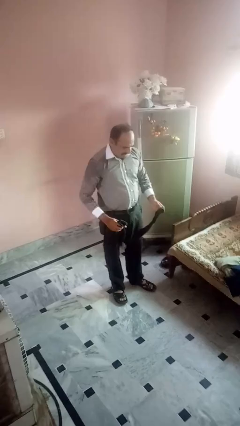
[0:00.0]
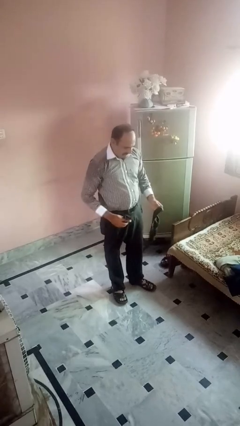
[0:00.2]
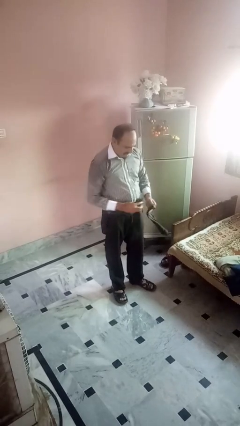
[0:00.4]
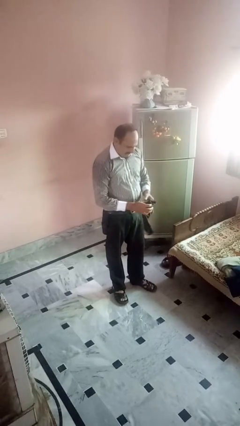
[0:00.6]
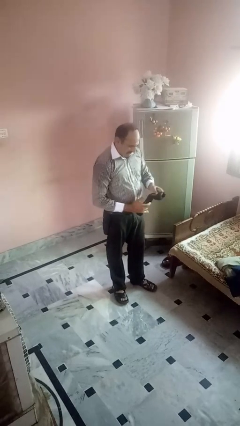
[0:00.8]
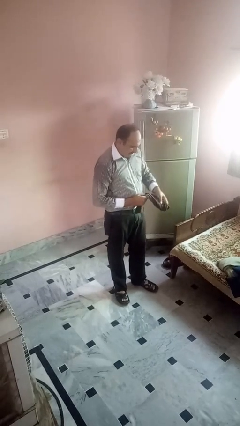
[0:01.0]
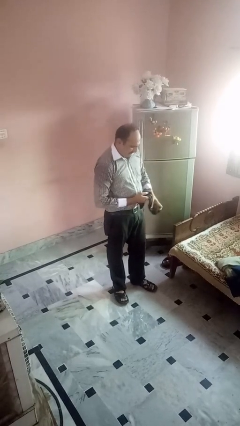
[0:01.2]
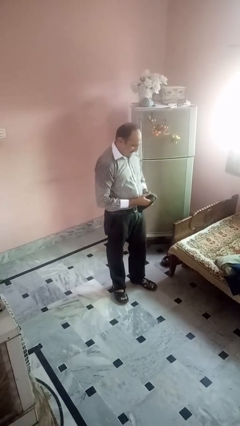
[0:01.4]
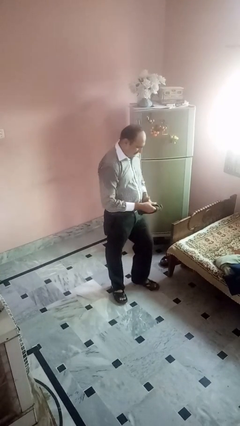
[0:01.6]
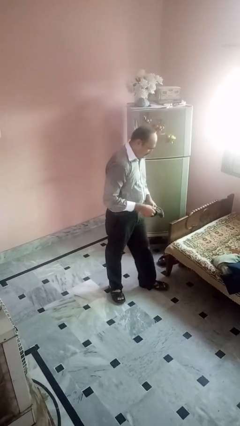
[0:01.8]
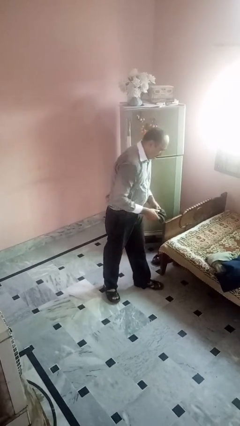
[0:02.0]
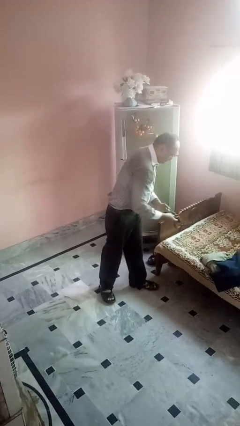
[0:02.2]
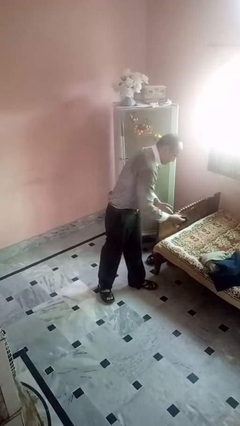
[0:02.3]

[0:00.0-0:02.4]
person folds socks

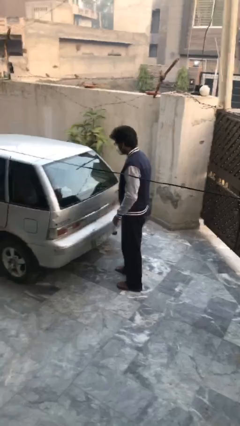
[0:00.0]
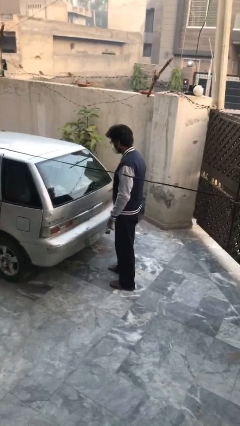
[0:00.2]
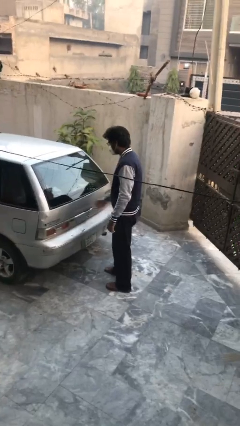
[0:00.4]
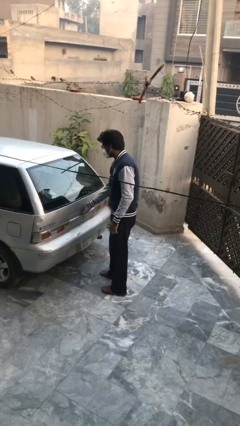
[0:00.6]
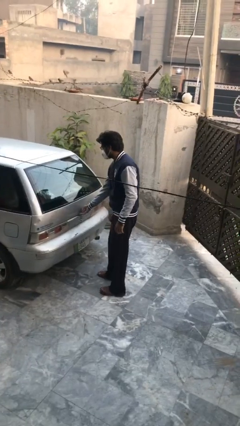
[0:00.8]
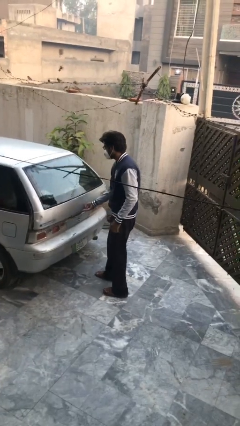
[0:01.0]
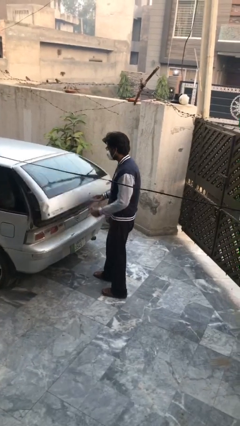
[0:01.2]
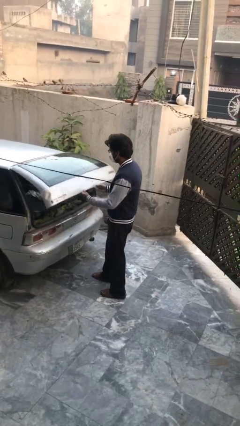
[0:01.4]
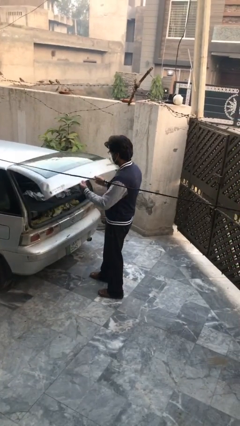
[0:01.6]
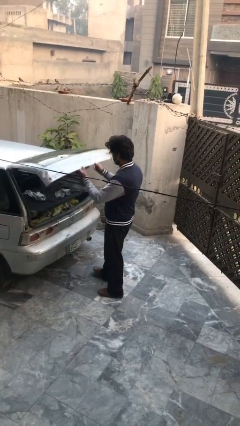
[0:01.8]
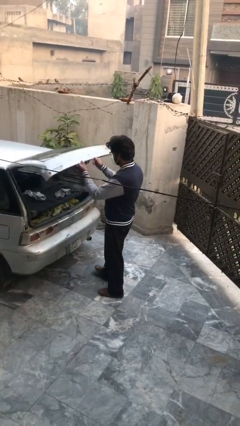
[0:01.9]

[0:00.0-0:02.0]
person opens car trunk

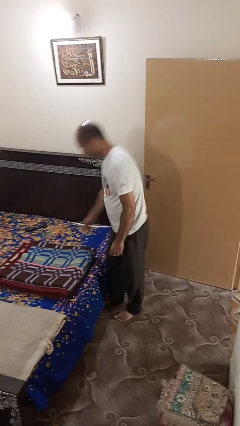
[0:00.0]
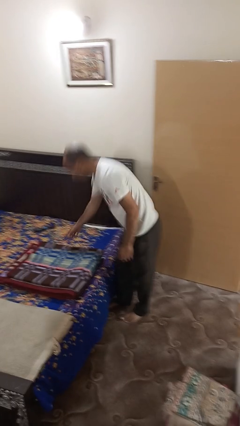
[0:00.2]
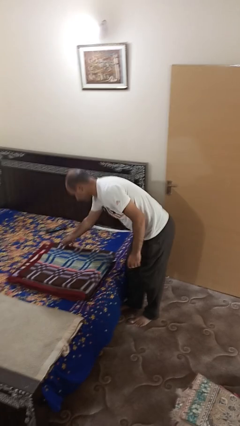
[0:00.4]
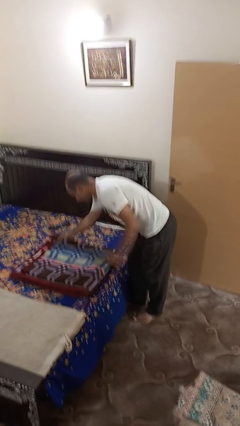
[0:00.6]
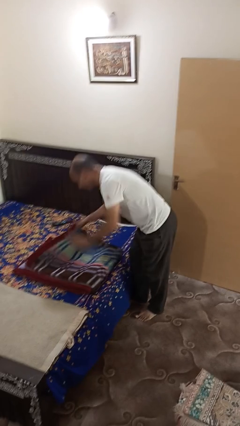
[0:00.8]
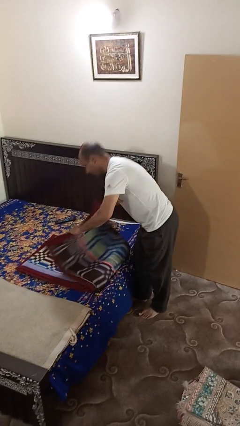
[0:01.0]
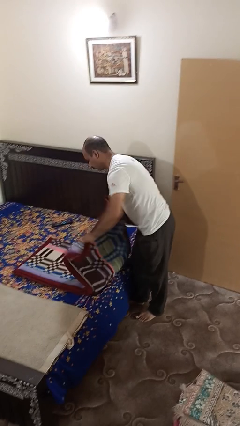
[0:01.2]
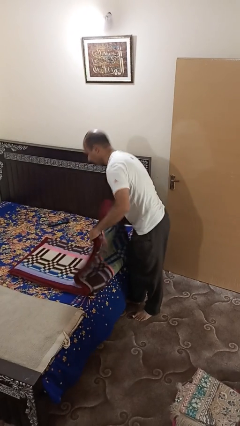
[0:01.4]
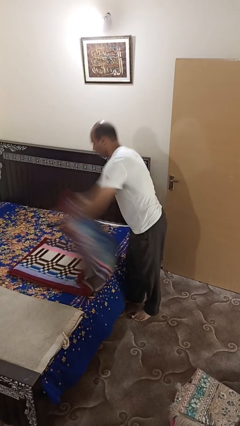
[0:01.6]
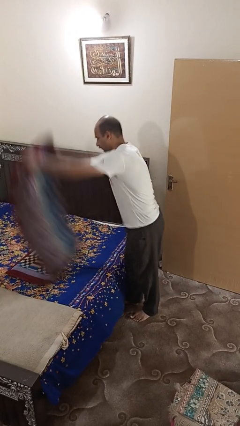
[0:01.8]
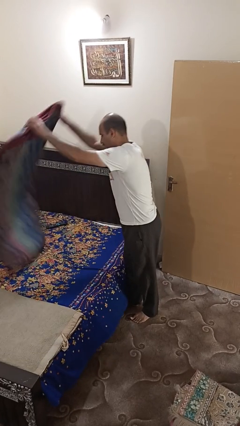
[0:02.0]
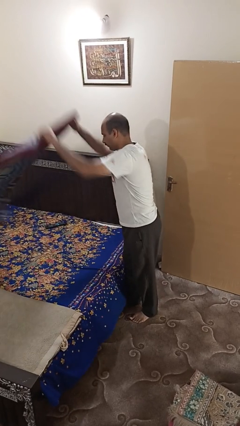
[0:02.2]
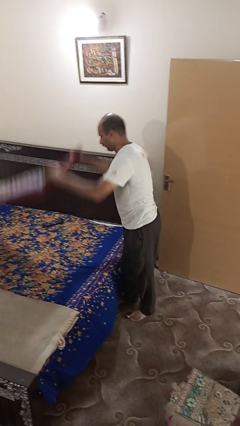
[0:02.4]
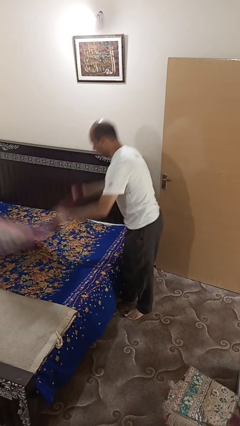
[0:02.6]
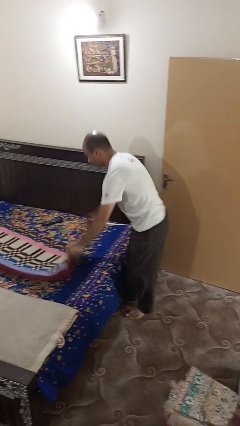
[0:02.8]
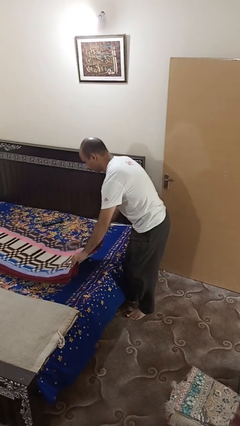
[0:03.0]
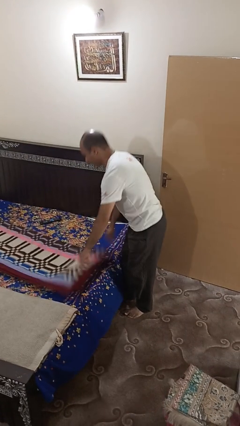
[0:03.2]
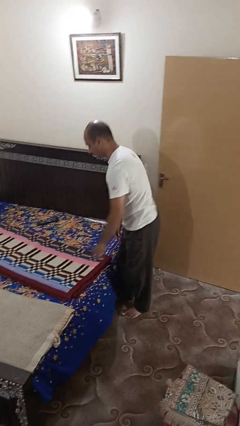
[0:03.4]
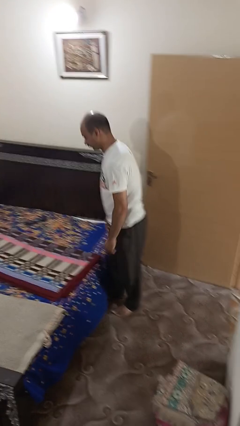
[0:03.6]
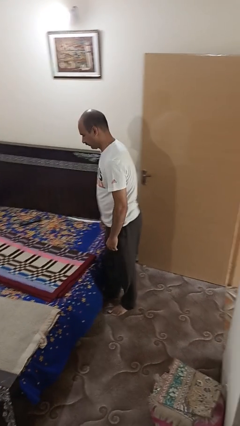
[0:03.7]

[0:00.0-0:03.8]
person unfolds blanket

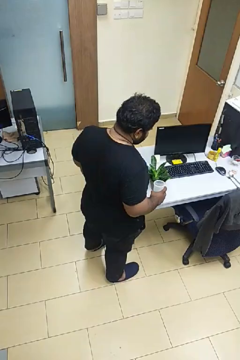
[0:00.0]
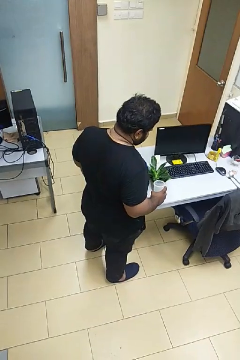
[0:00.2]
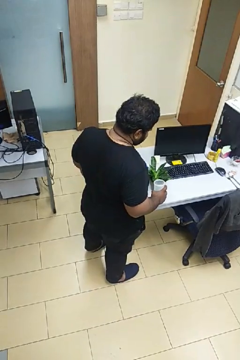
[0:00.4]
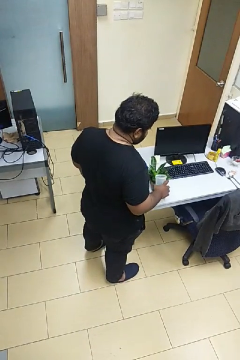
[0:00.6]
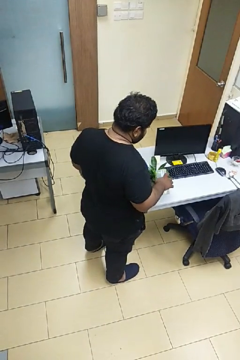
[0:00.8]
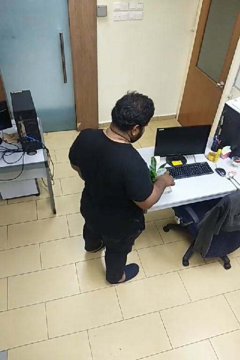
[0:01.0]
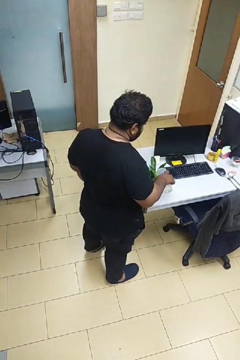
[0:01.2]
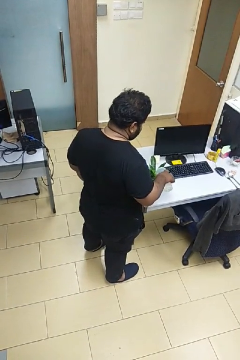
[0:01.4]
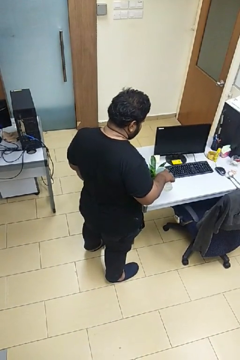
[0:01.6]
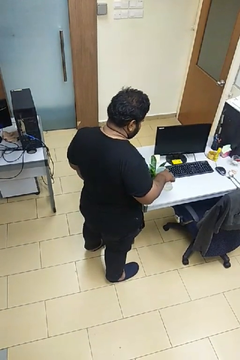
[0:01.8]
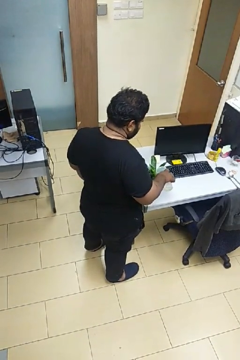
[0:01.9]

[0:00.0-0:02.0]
person waters houseplant

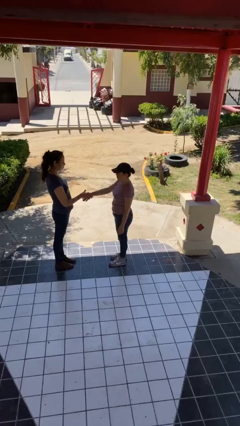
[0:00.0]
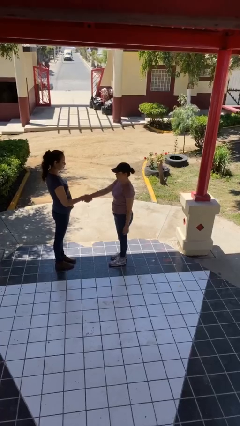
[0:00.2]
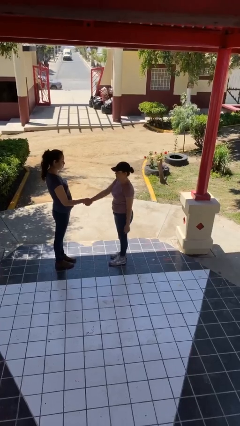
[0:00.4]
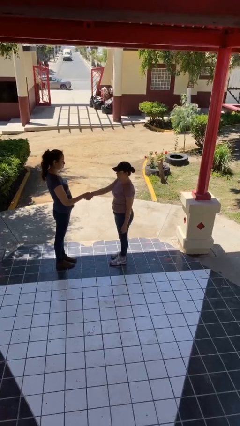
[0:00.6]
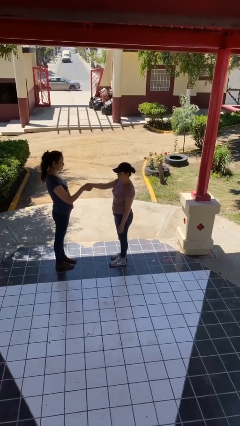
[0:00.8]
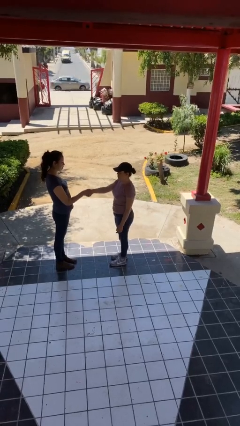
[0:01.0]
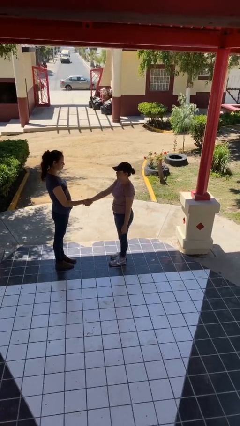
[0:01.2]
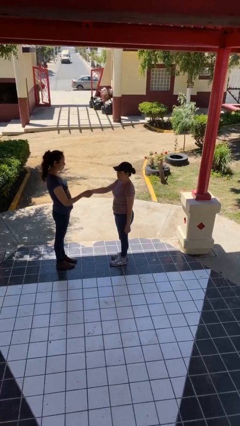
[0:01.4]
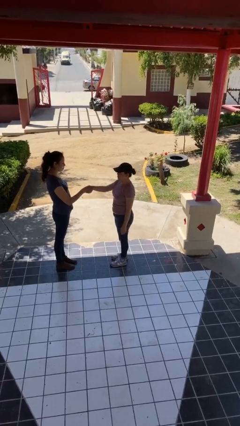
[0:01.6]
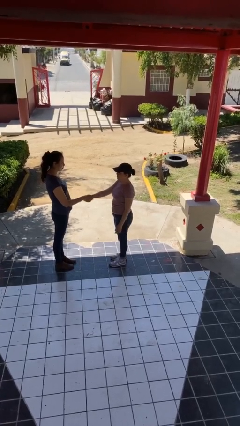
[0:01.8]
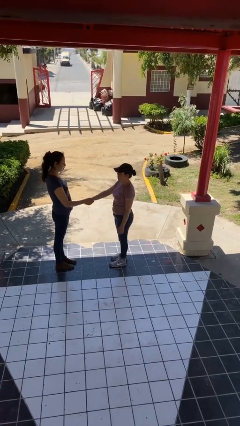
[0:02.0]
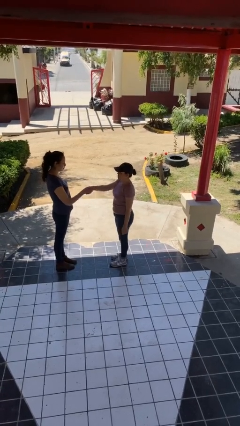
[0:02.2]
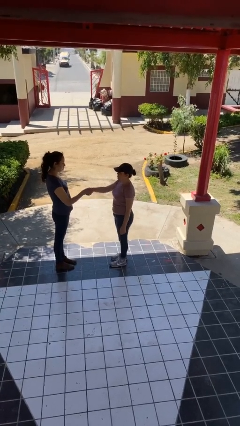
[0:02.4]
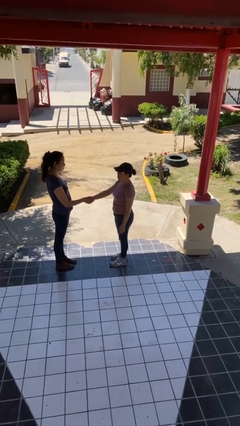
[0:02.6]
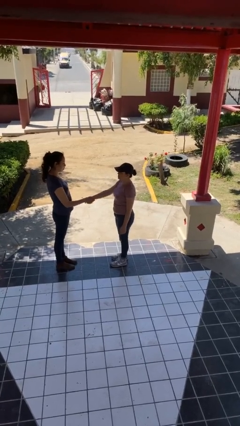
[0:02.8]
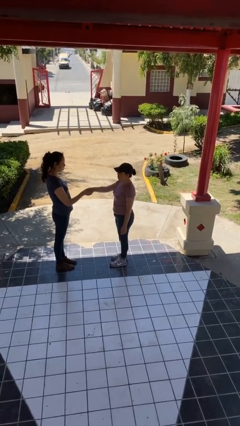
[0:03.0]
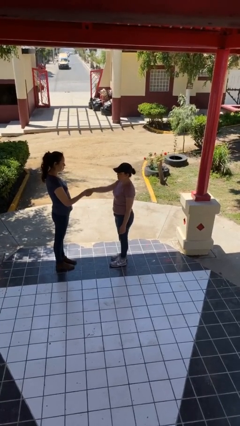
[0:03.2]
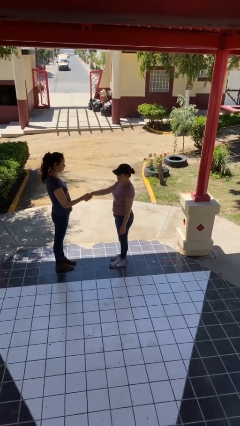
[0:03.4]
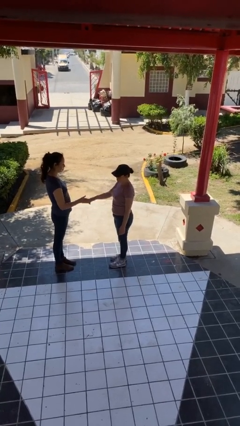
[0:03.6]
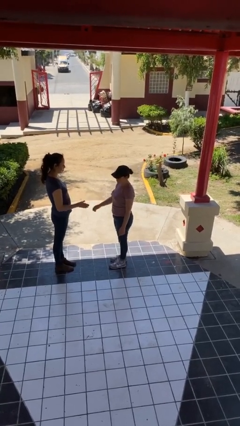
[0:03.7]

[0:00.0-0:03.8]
person shakes hand

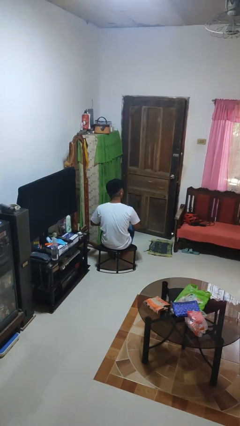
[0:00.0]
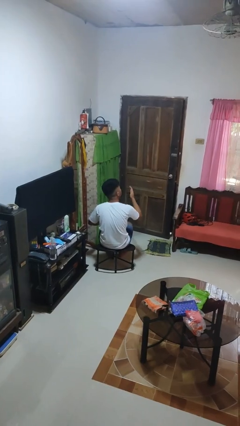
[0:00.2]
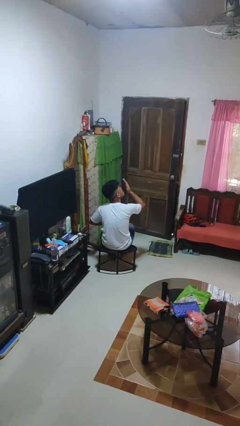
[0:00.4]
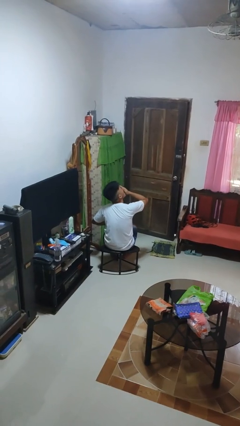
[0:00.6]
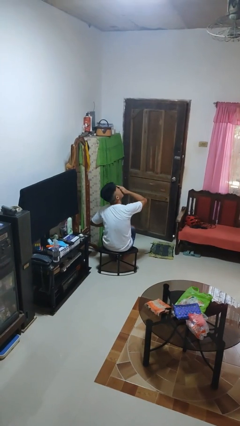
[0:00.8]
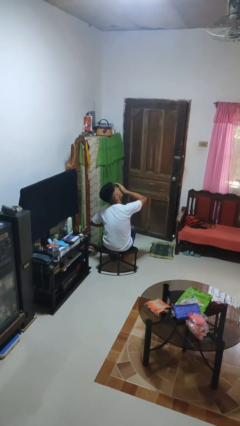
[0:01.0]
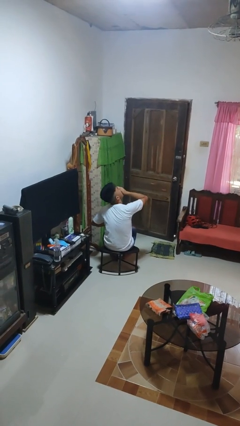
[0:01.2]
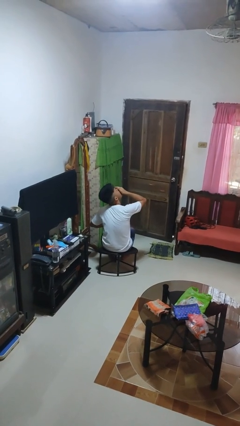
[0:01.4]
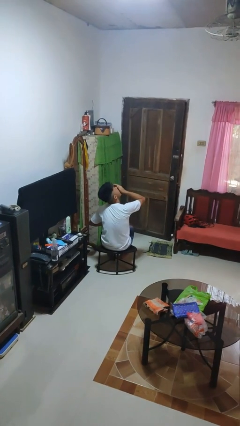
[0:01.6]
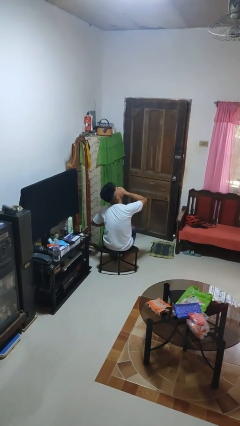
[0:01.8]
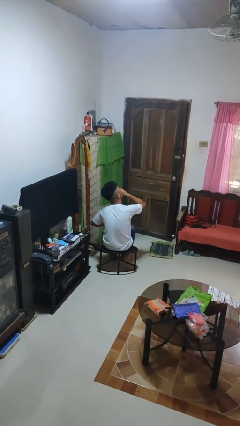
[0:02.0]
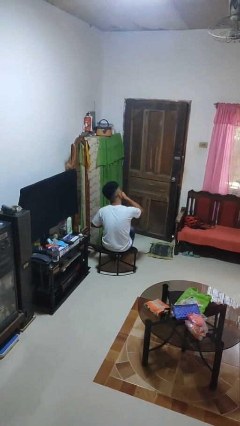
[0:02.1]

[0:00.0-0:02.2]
person yawns

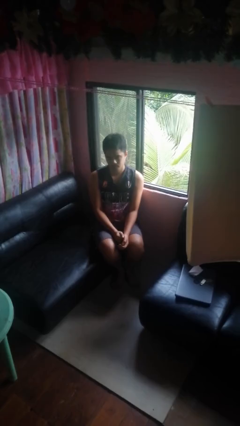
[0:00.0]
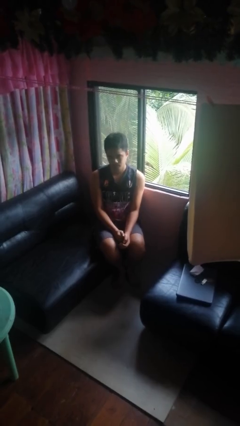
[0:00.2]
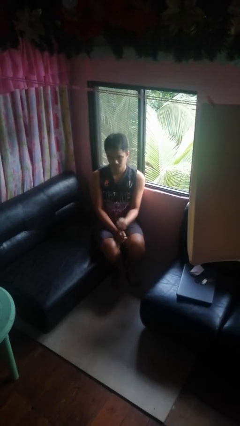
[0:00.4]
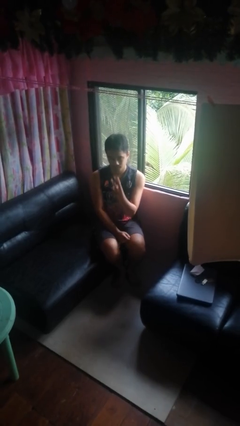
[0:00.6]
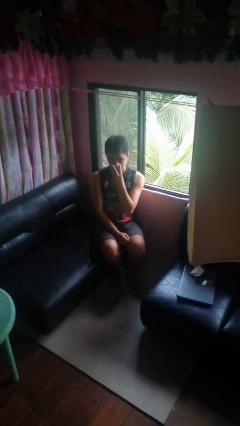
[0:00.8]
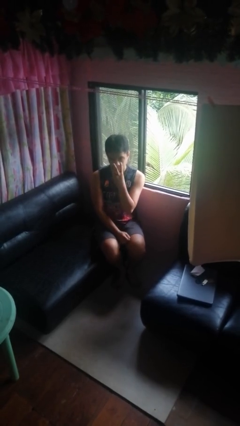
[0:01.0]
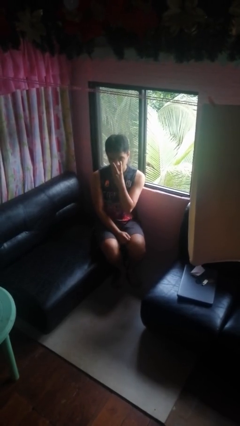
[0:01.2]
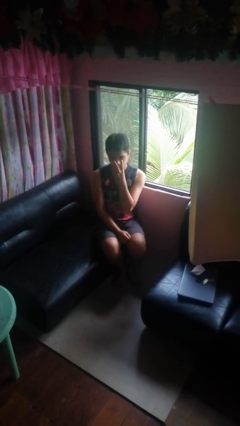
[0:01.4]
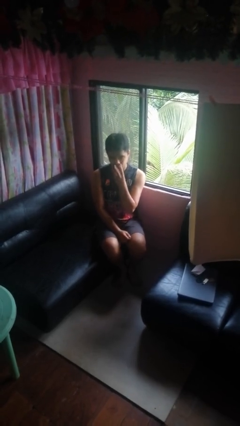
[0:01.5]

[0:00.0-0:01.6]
person gestures watch closely
